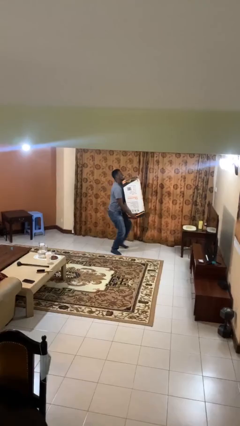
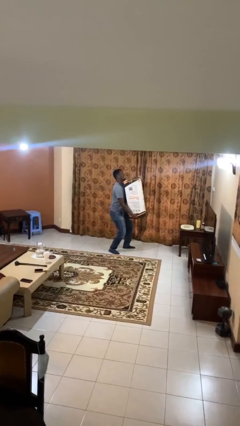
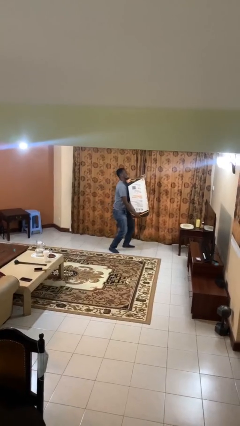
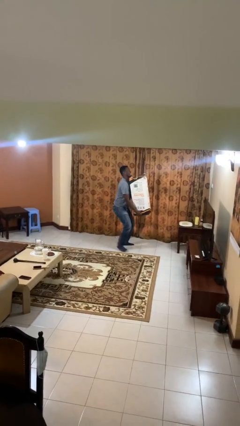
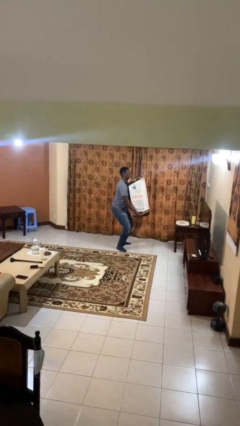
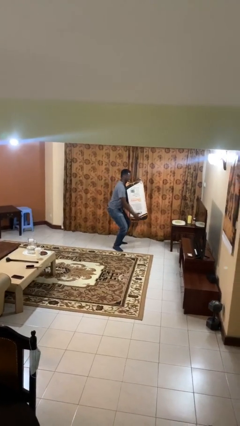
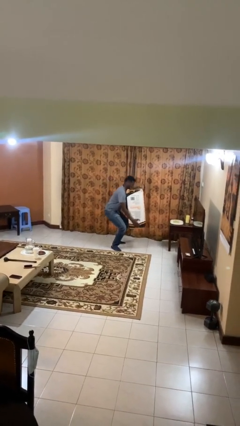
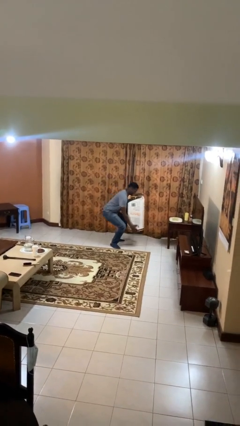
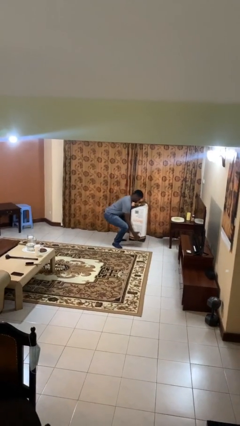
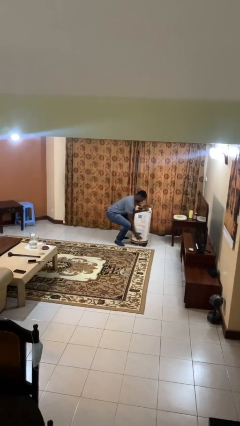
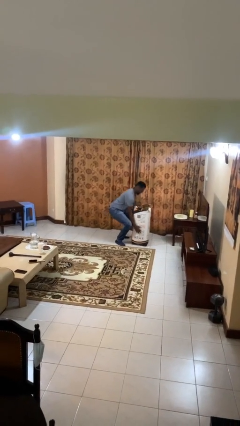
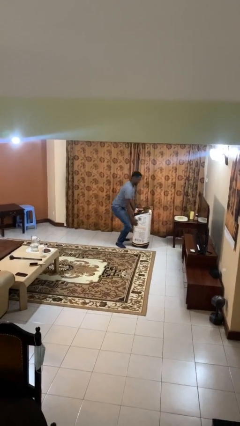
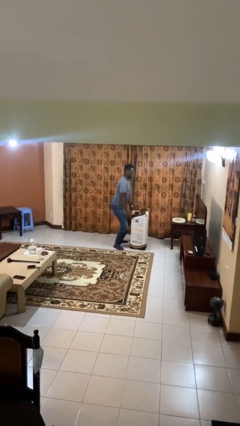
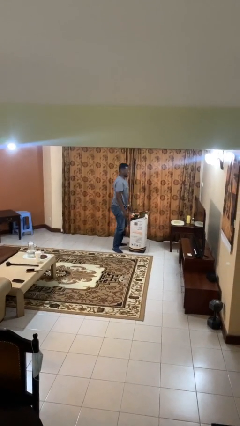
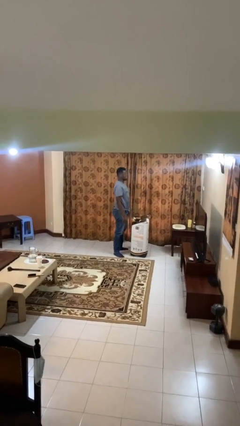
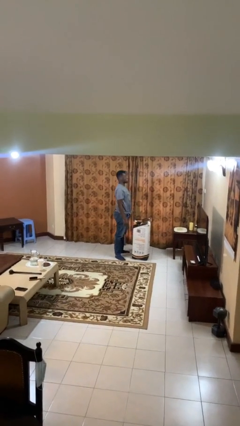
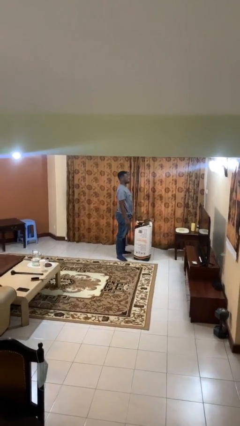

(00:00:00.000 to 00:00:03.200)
person puts down object on floor

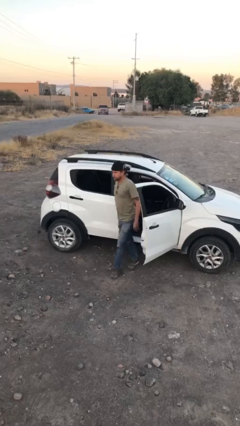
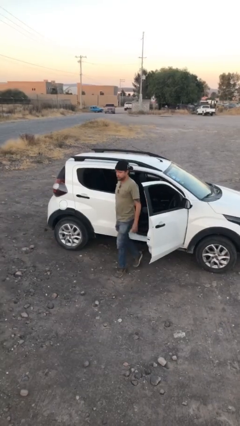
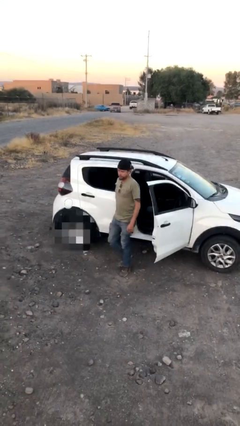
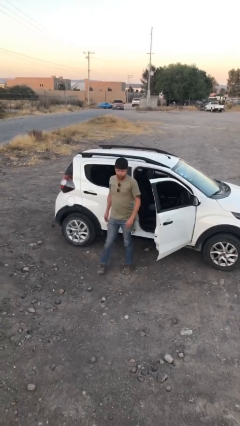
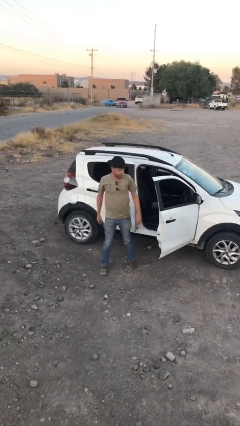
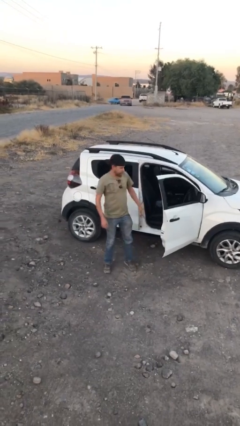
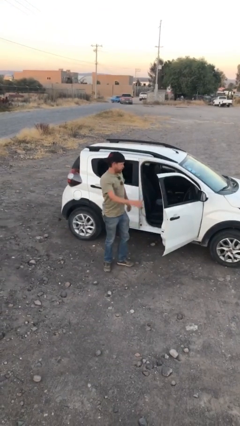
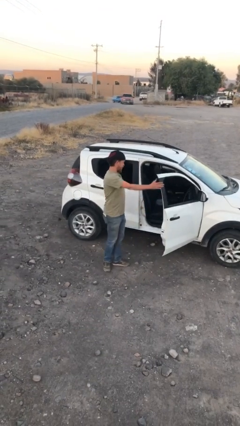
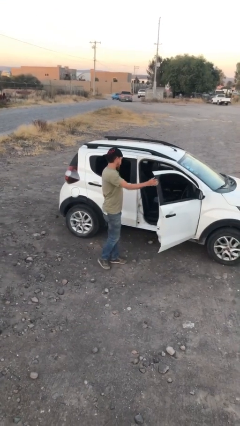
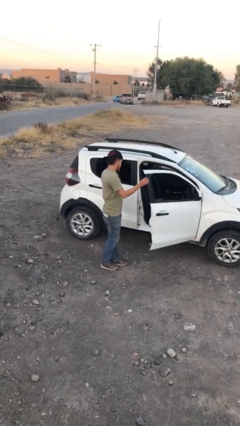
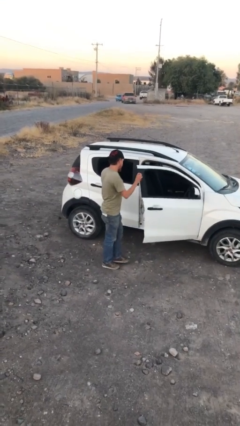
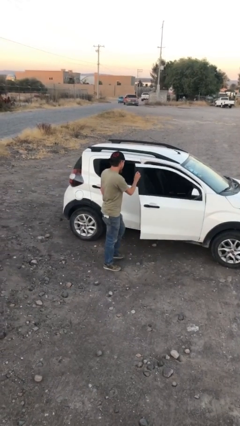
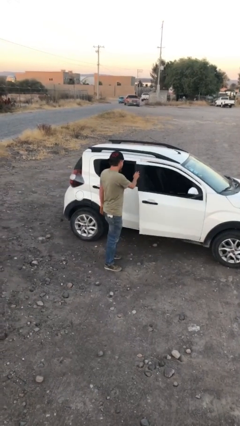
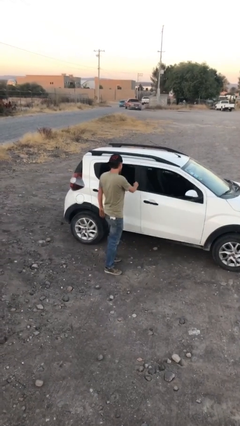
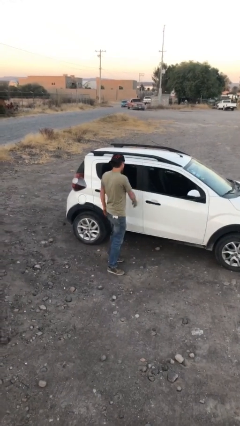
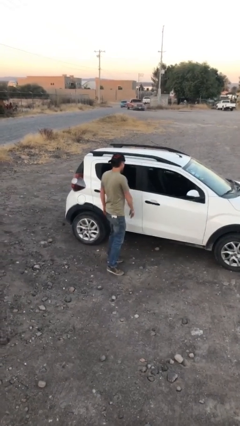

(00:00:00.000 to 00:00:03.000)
person closes car door

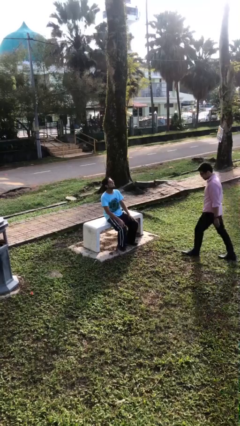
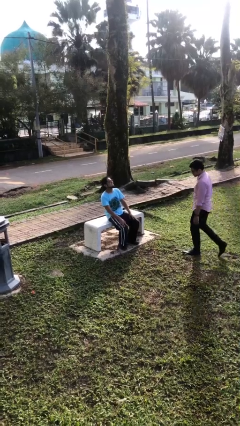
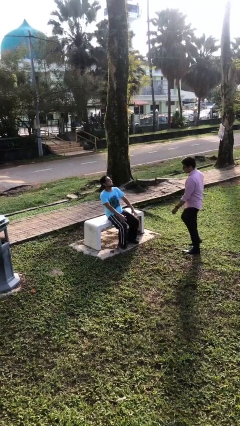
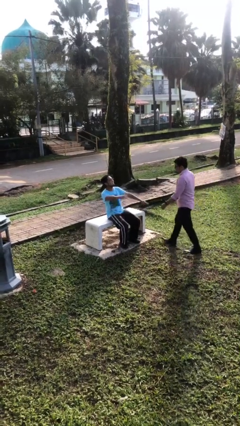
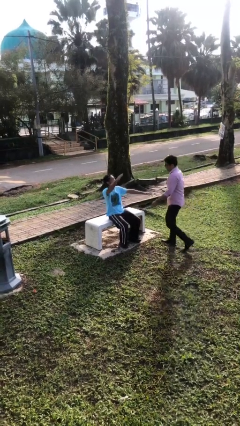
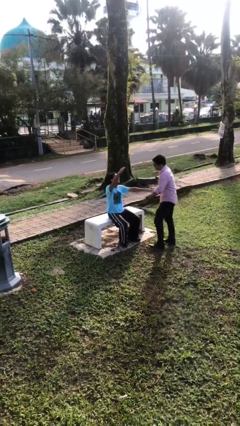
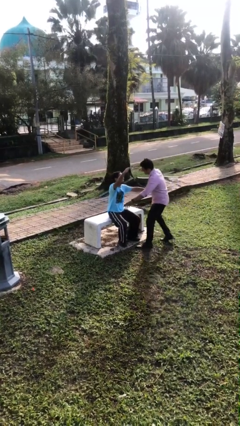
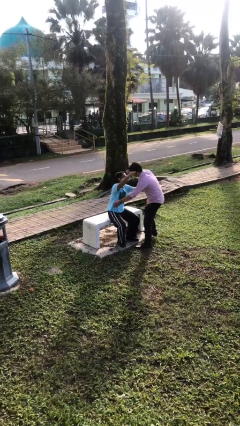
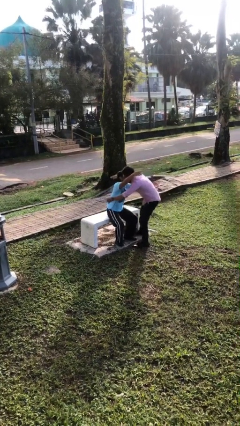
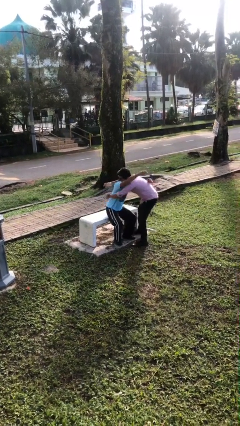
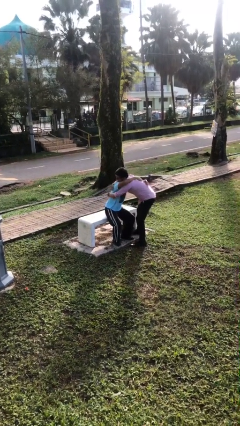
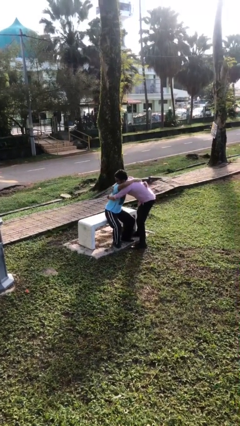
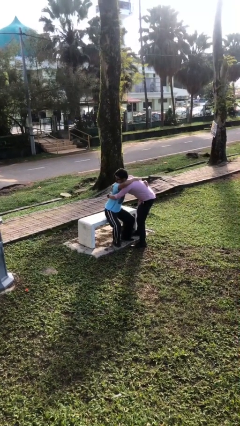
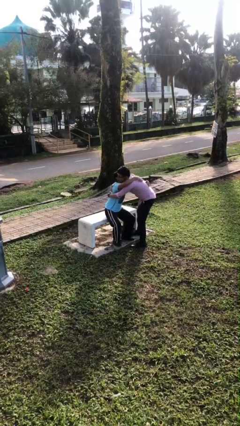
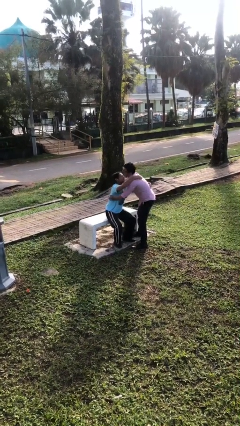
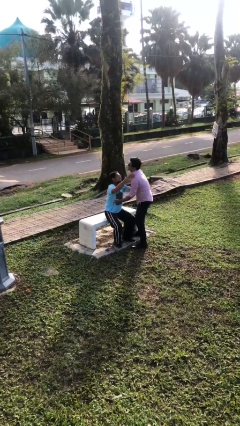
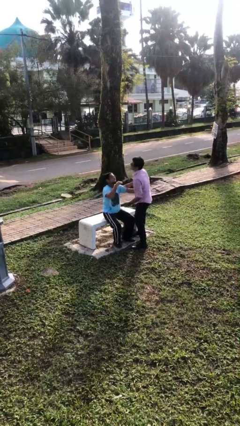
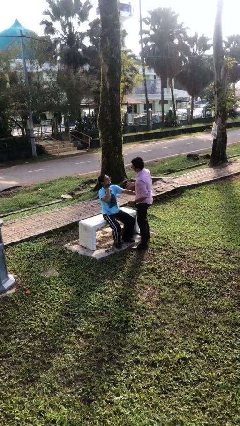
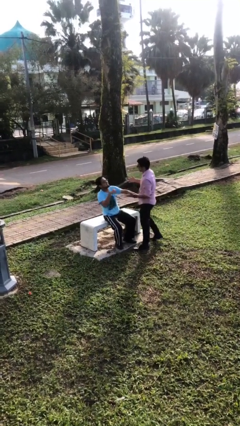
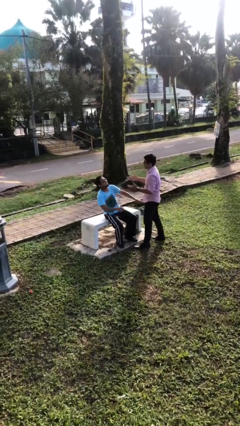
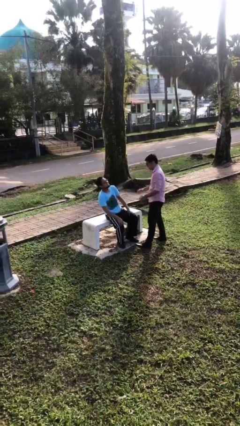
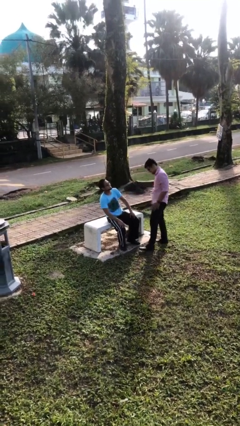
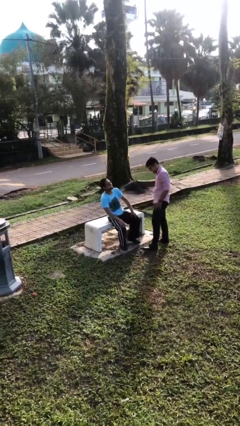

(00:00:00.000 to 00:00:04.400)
person embraces person

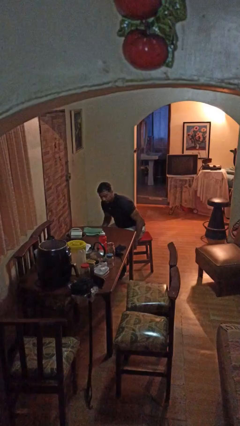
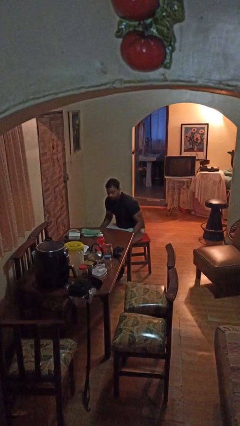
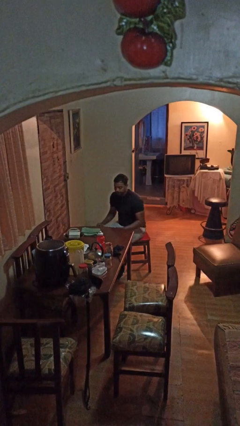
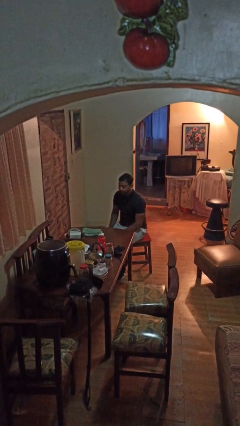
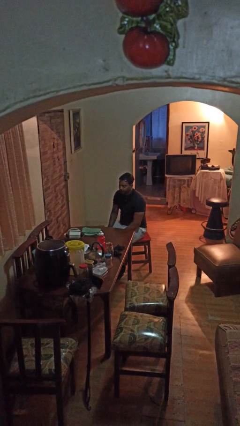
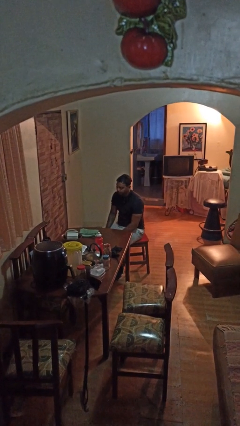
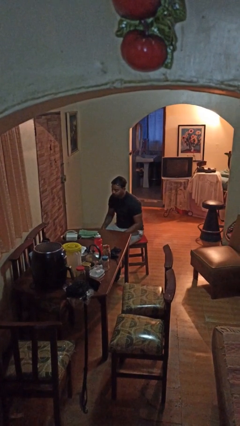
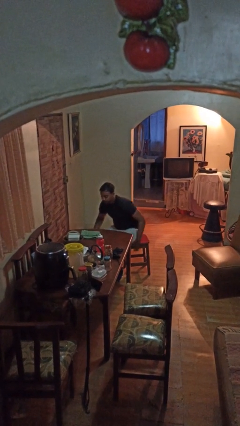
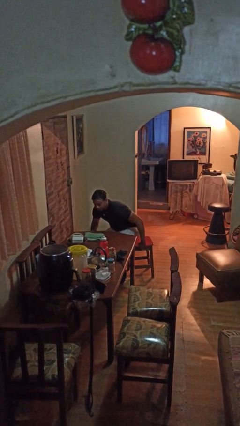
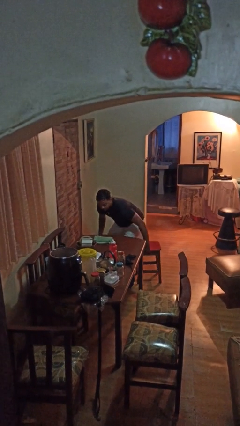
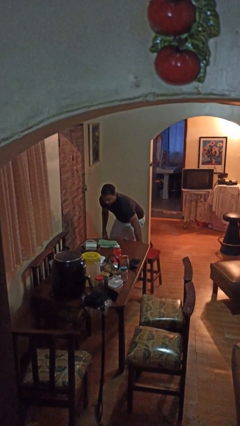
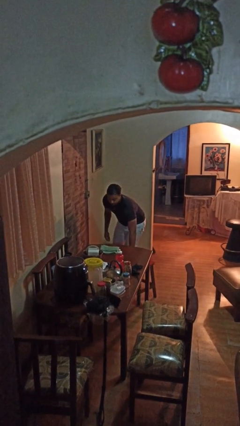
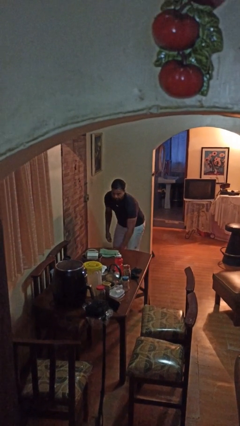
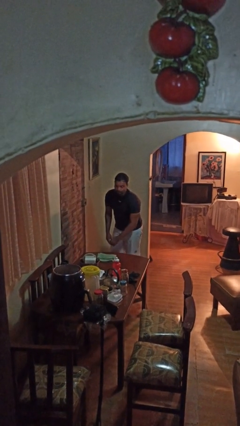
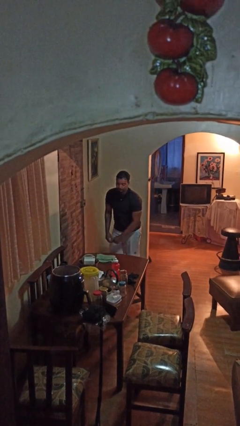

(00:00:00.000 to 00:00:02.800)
person stands up

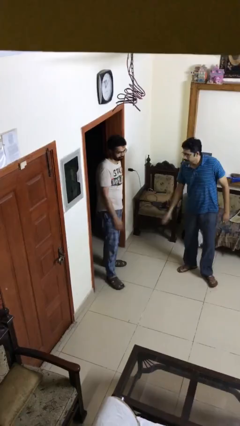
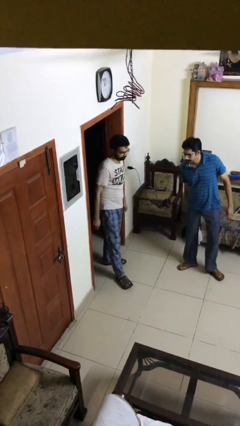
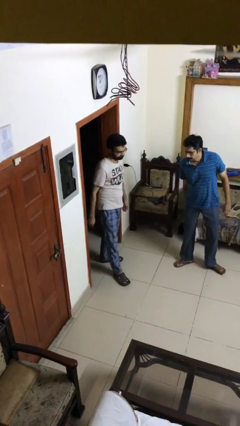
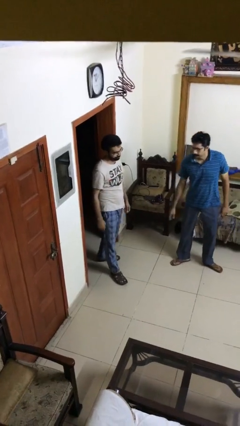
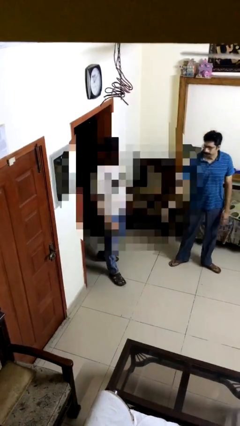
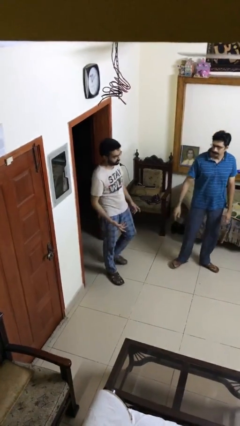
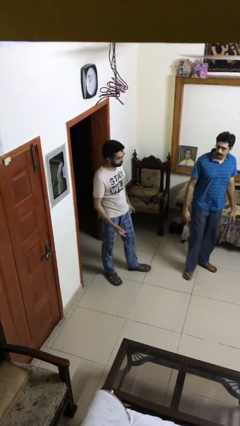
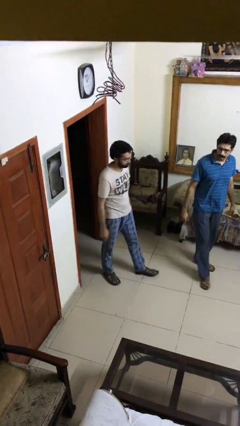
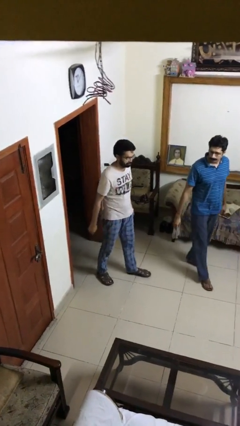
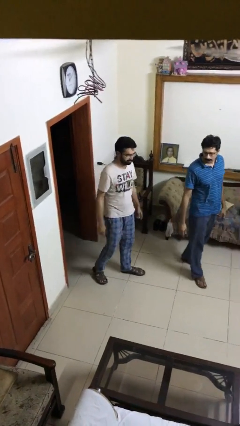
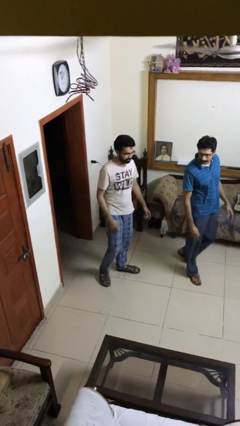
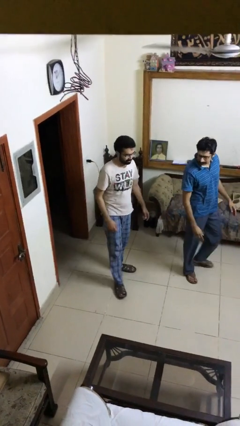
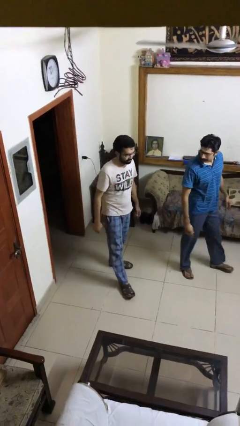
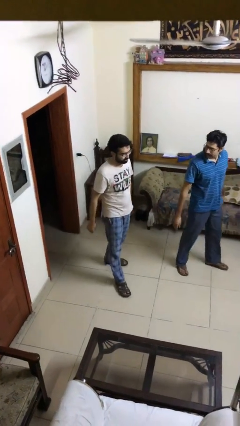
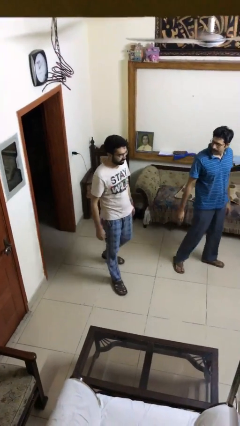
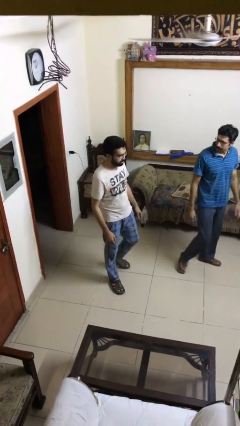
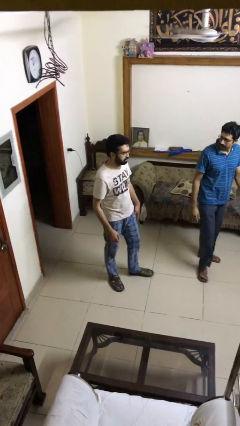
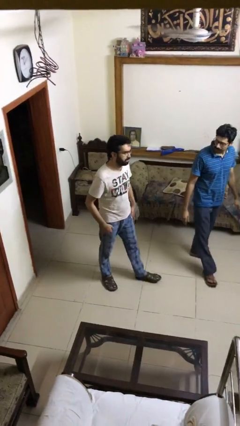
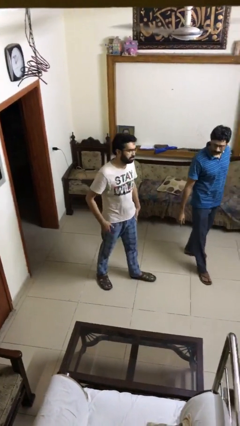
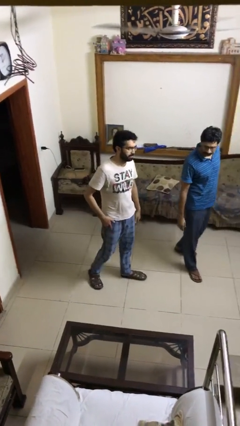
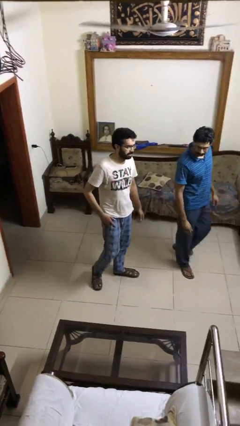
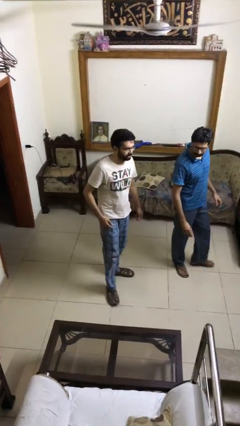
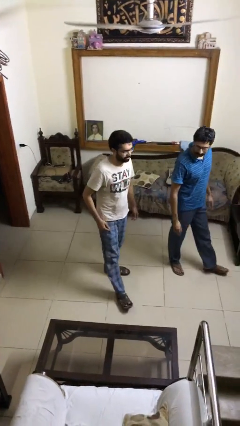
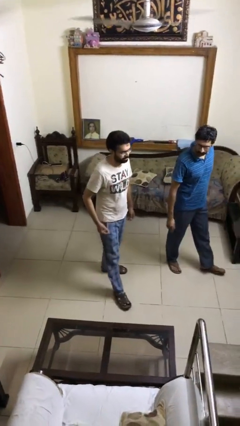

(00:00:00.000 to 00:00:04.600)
person talks to person
